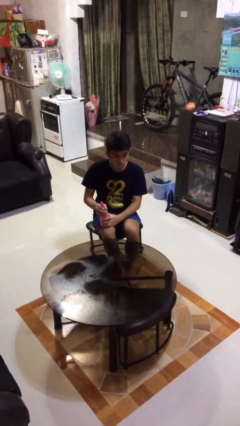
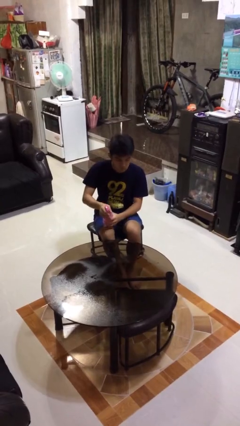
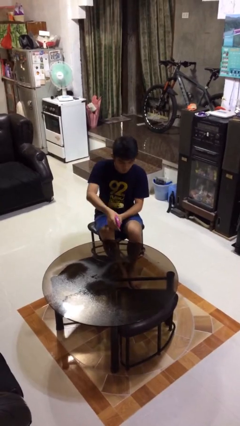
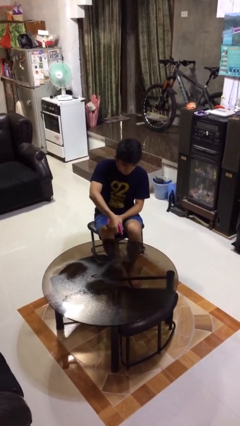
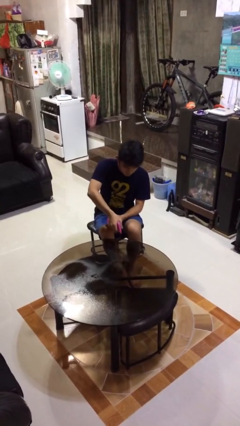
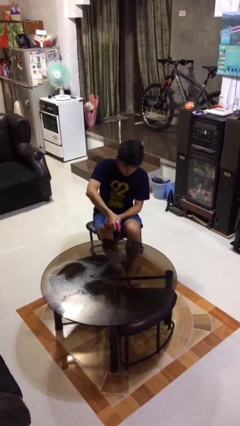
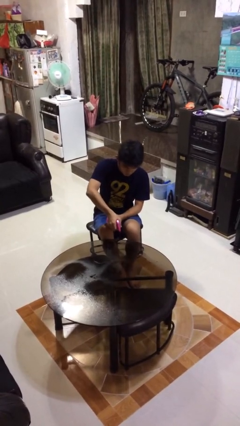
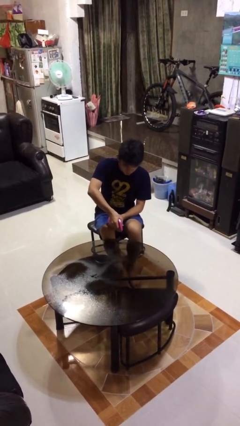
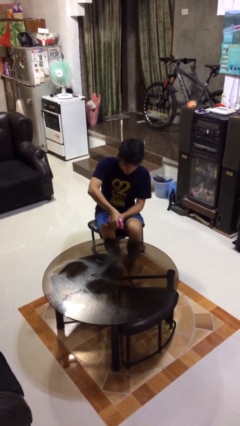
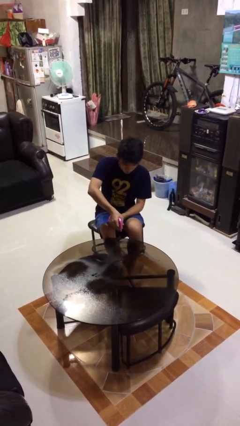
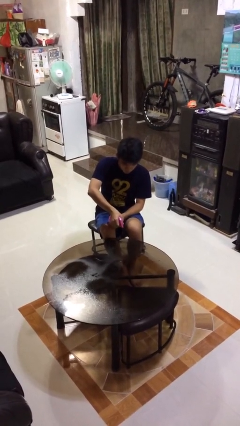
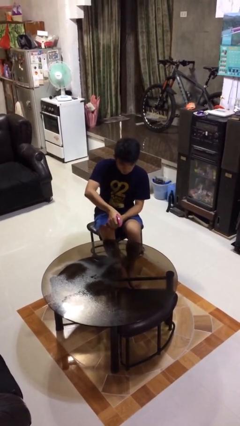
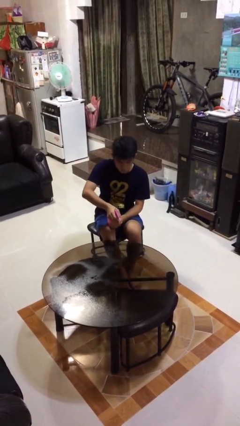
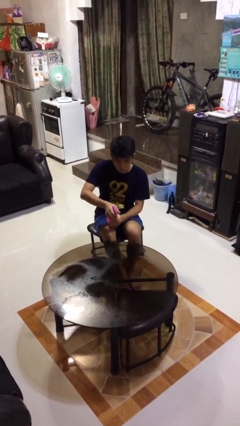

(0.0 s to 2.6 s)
person sprays from bottle

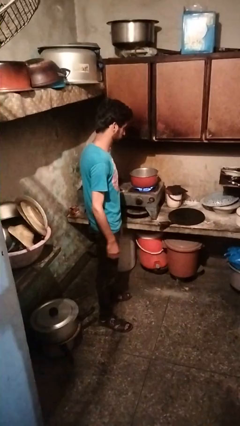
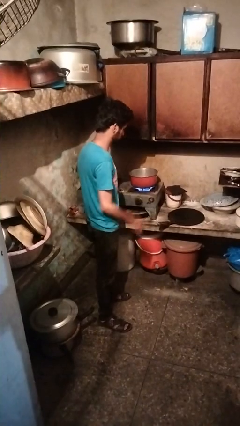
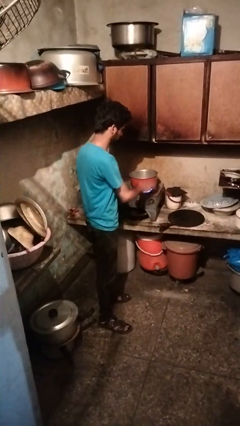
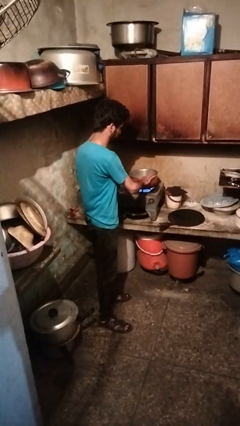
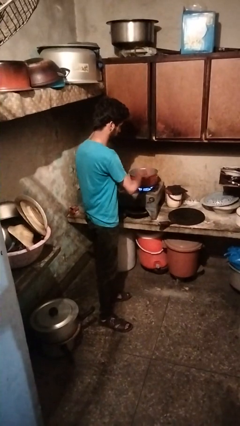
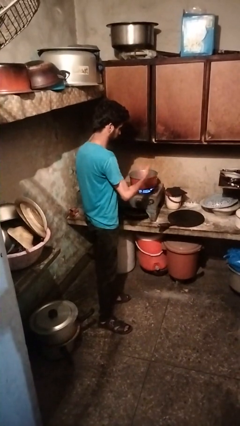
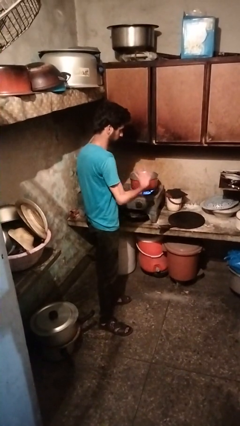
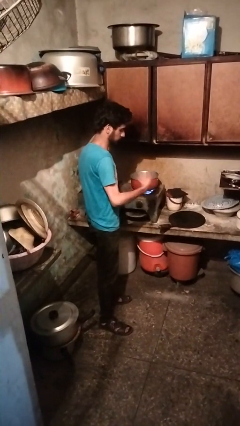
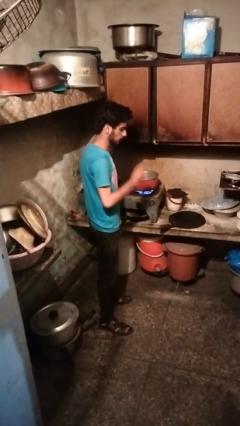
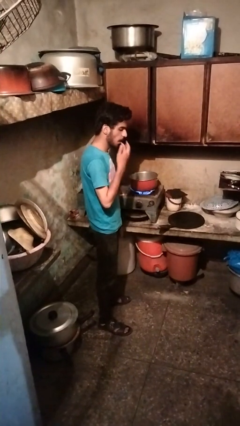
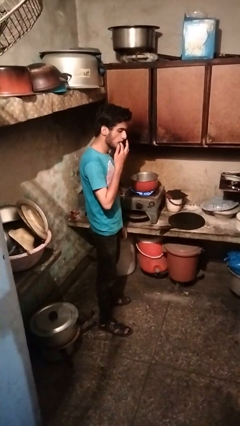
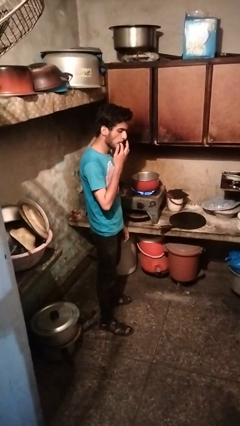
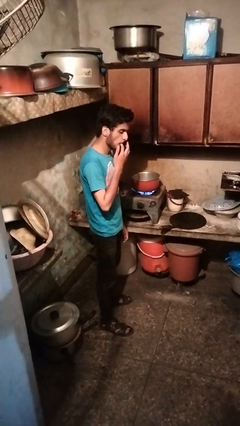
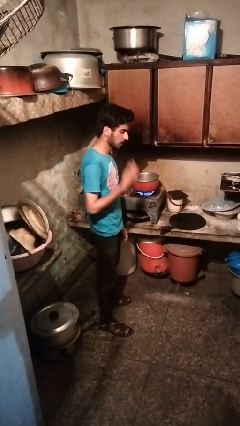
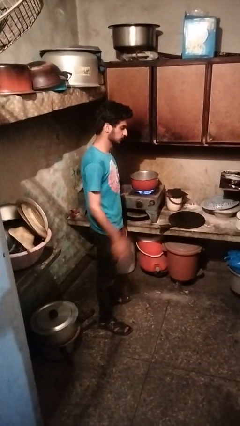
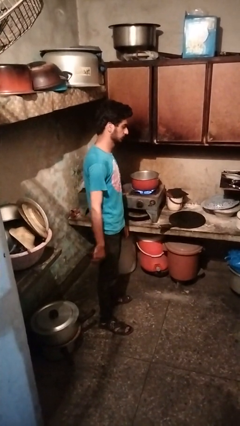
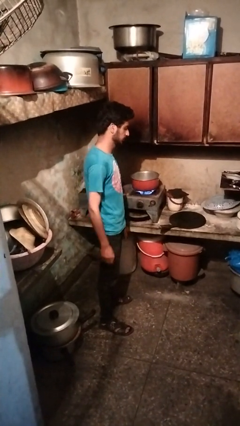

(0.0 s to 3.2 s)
person burns hand

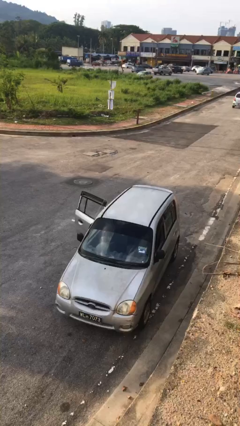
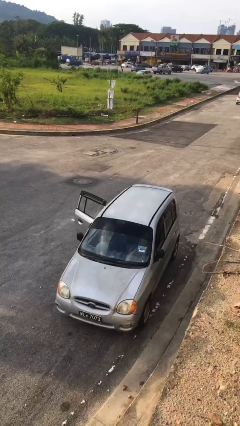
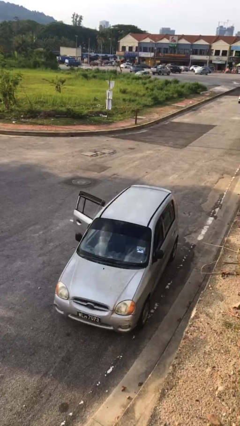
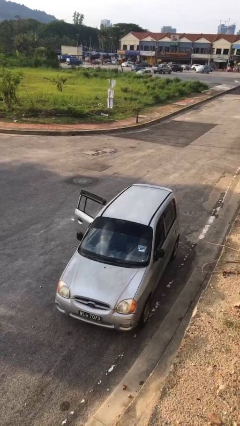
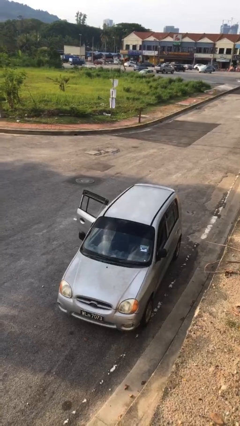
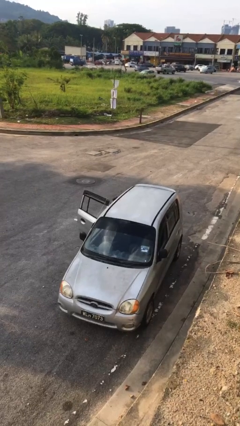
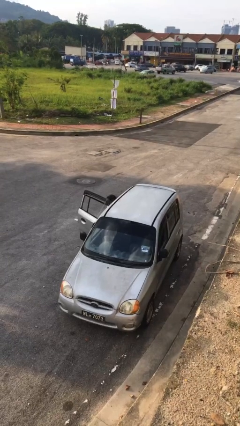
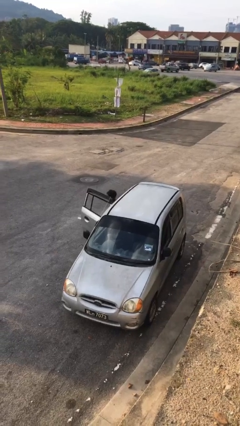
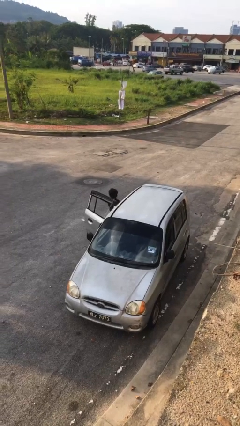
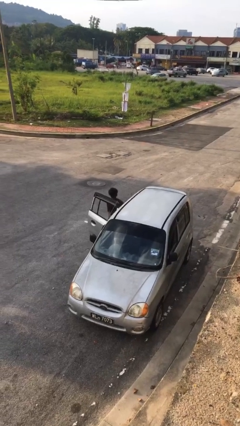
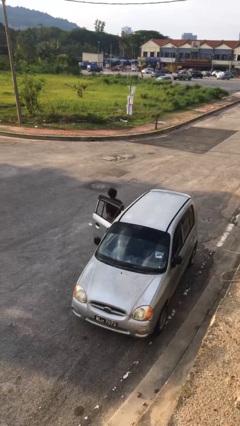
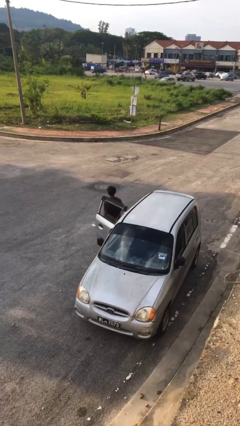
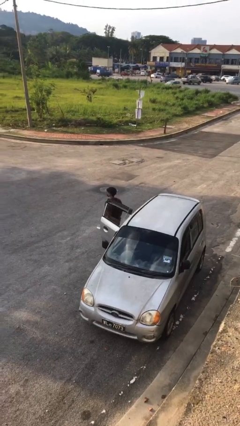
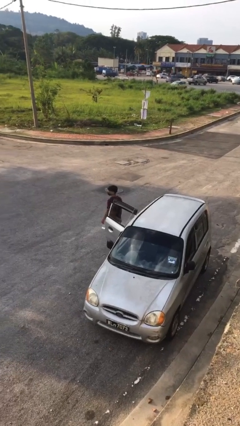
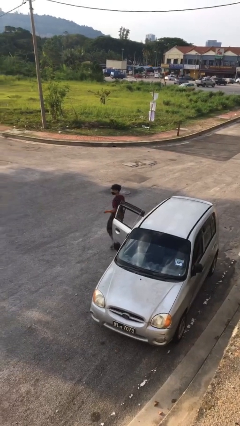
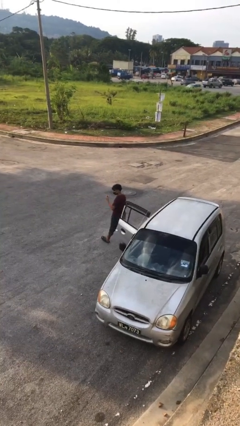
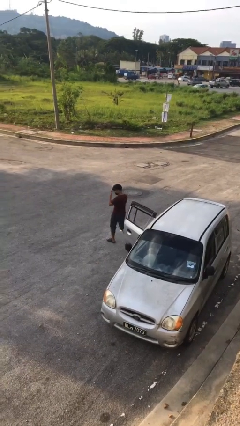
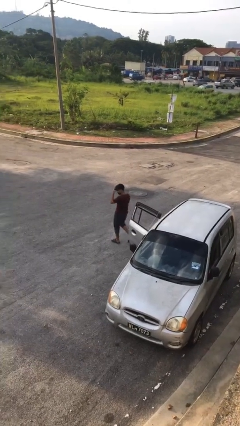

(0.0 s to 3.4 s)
person exits car

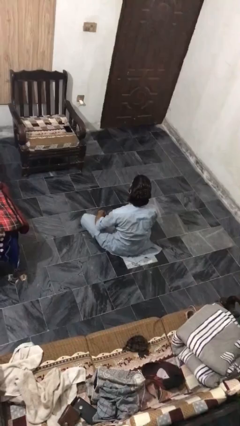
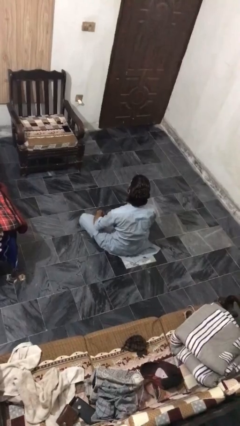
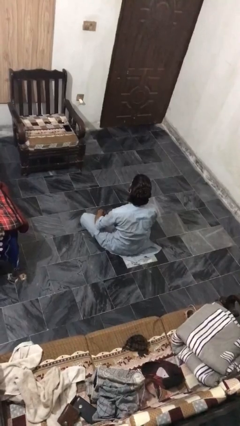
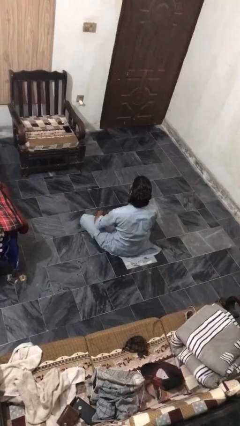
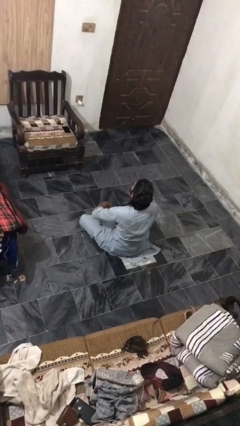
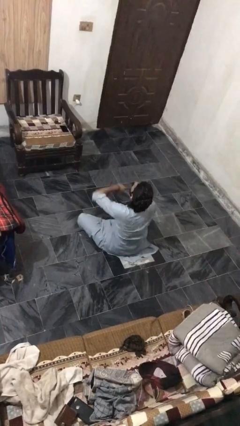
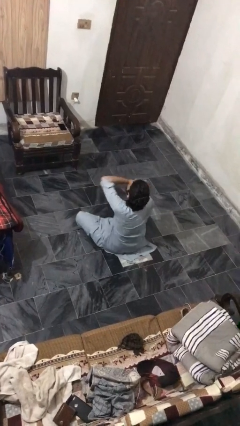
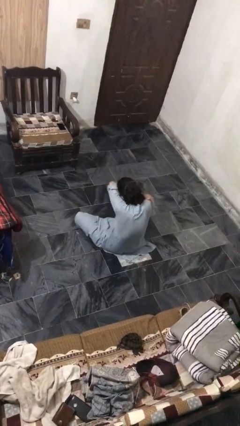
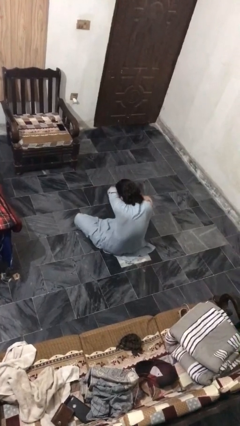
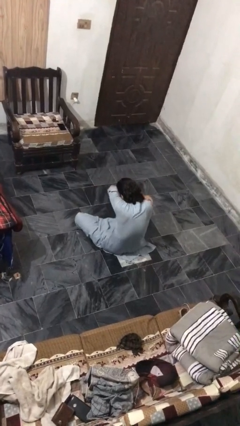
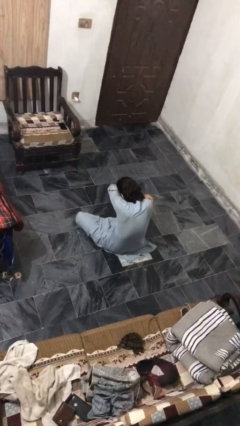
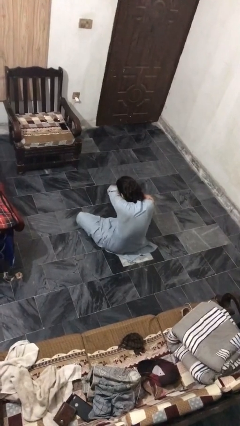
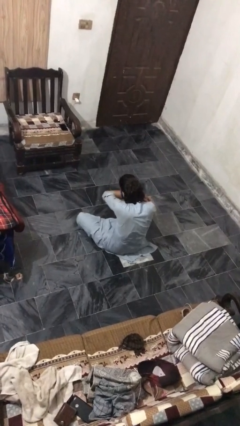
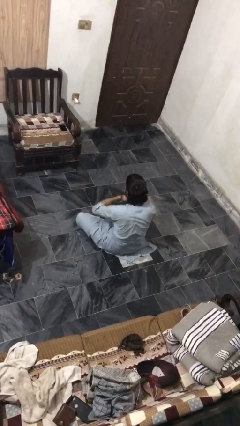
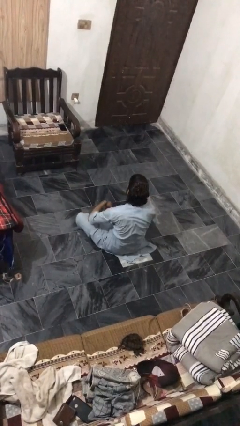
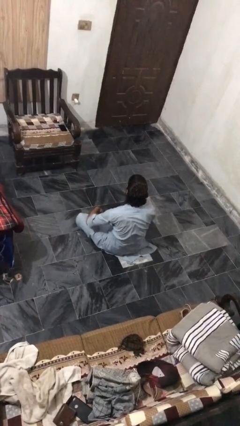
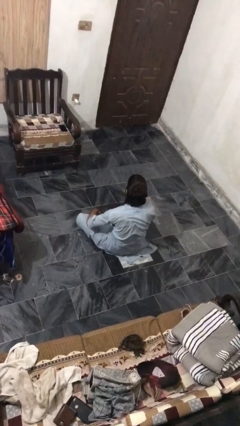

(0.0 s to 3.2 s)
person sneezes into arm

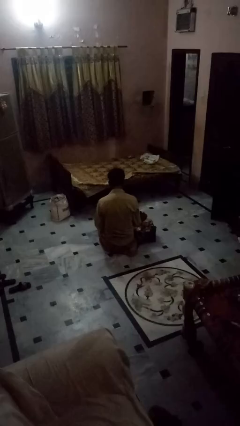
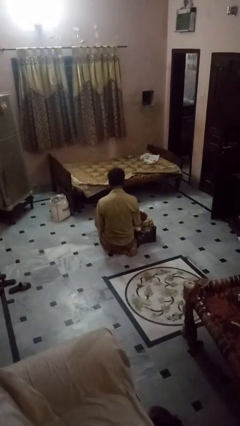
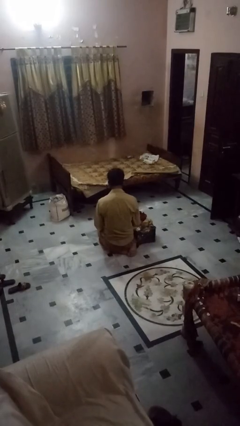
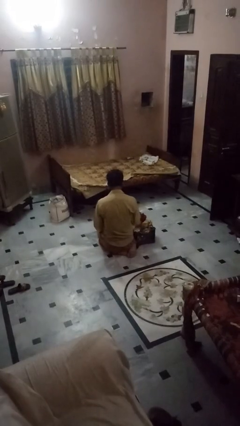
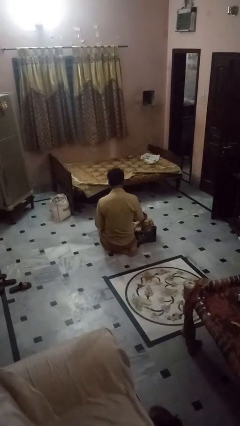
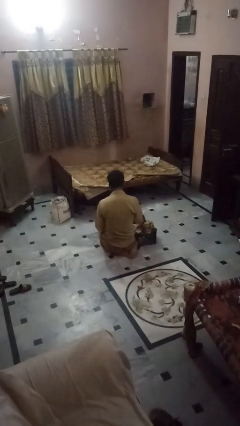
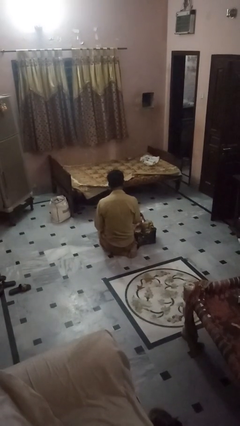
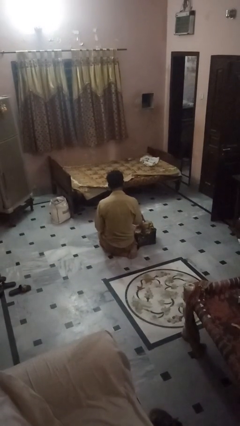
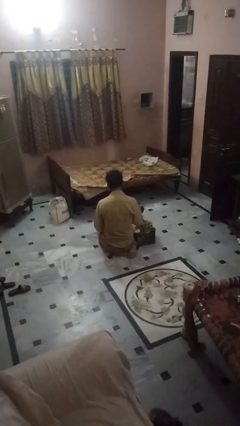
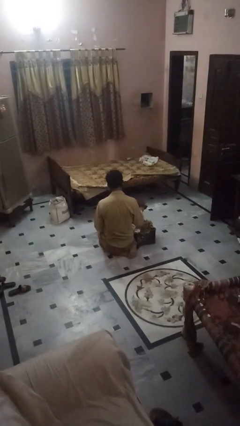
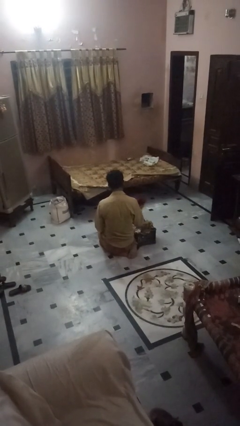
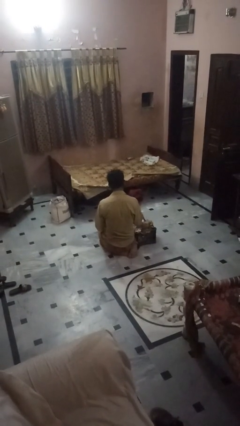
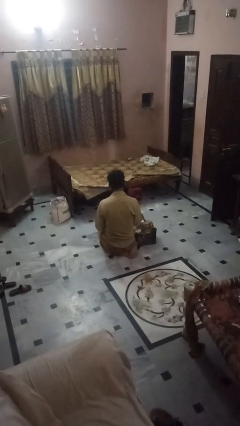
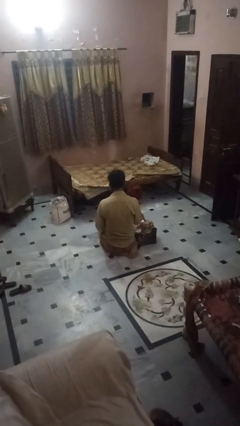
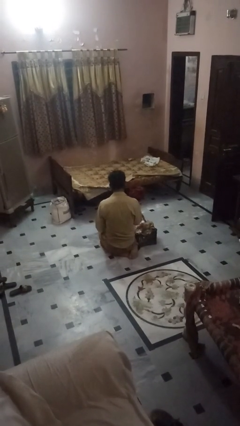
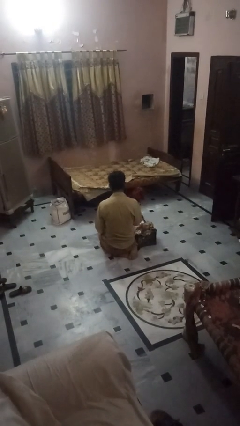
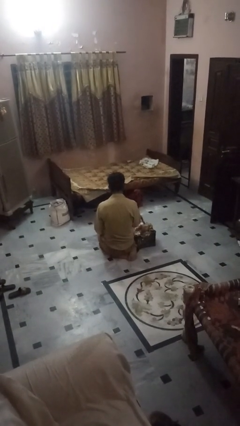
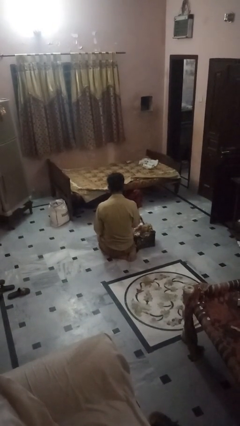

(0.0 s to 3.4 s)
person takes object from bag

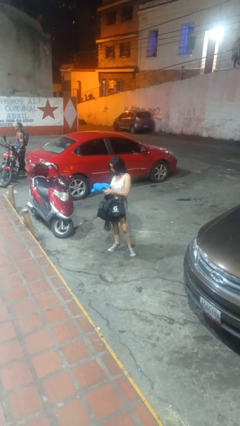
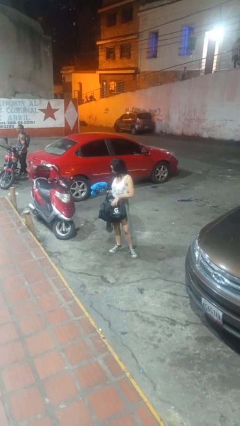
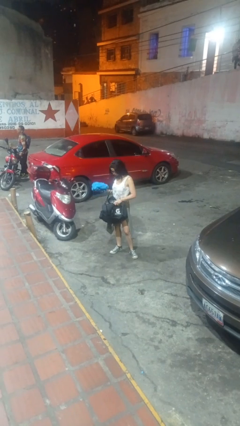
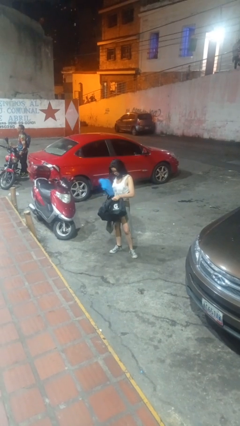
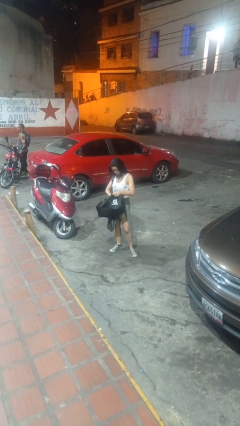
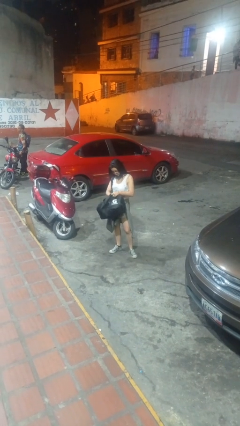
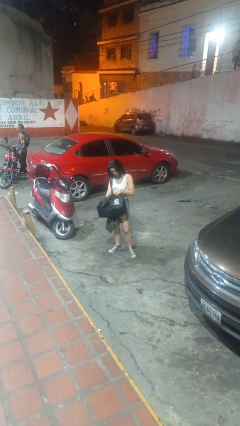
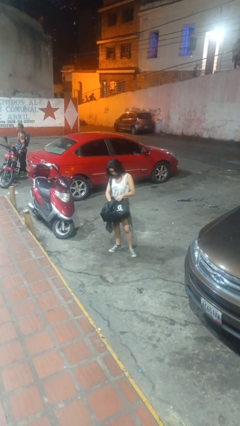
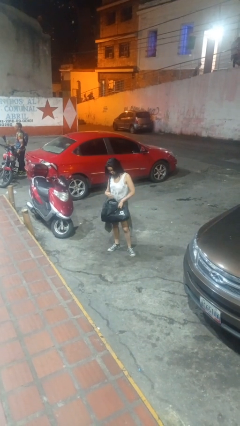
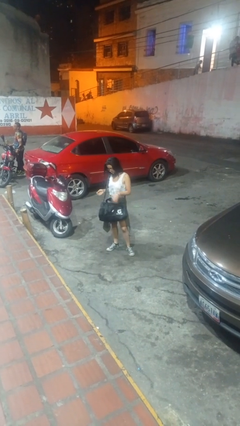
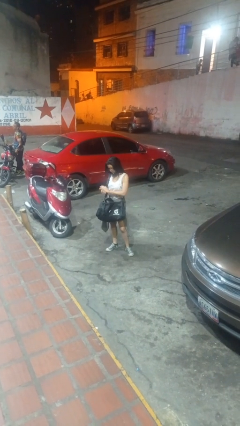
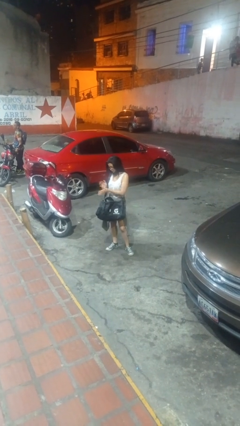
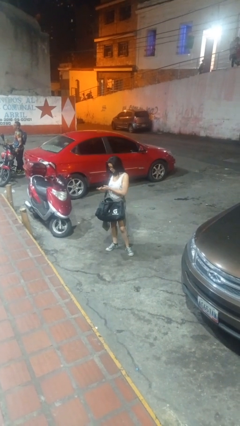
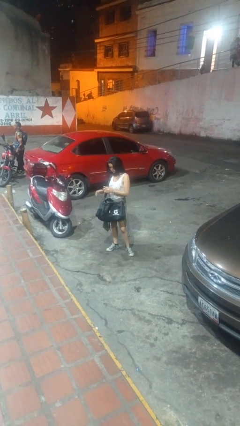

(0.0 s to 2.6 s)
person puts object into purse
